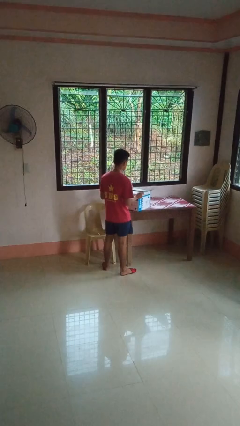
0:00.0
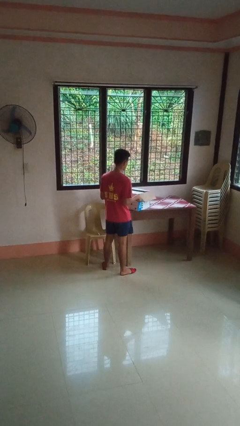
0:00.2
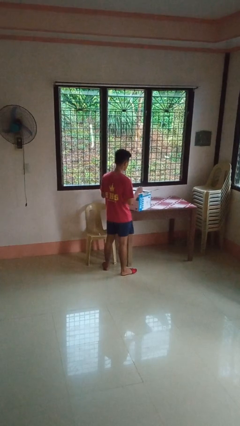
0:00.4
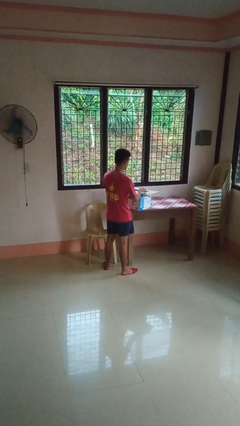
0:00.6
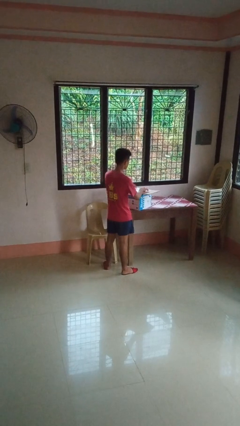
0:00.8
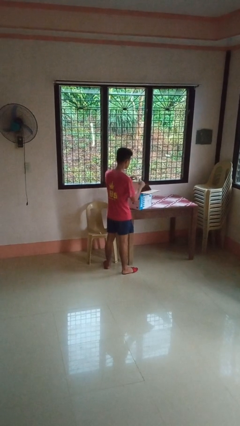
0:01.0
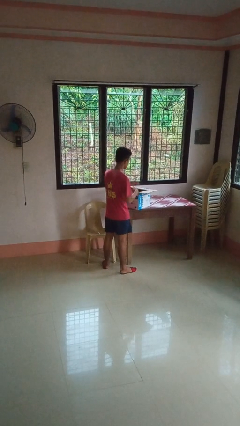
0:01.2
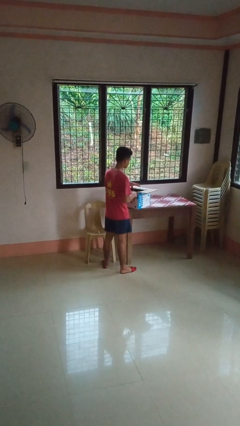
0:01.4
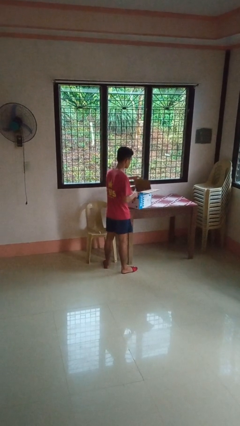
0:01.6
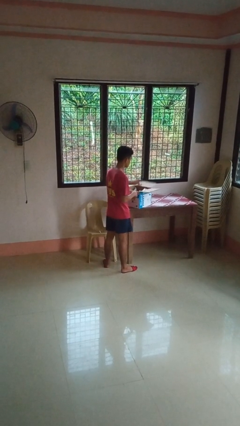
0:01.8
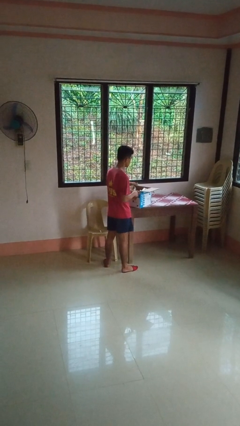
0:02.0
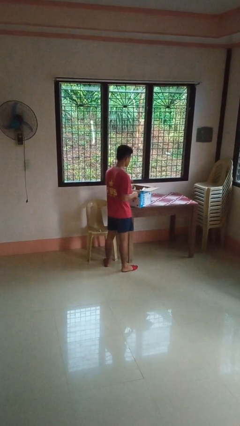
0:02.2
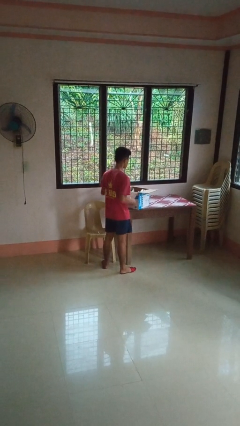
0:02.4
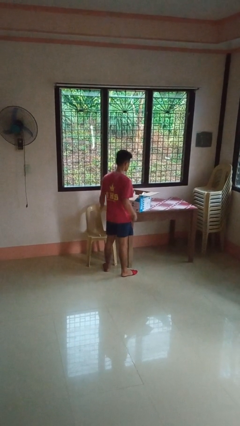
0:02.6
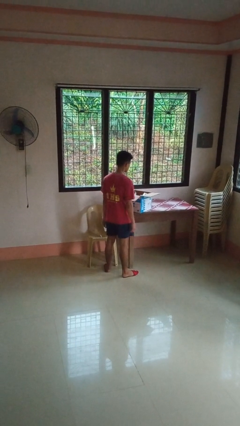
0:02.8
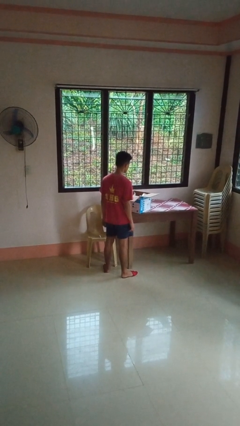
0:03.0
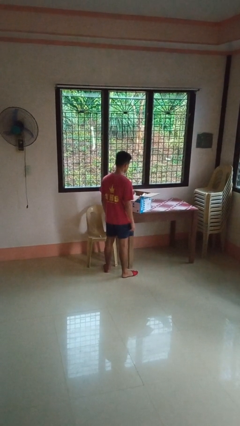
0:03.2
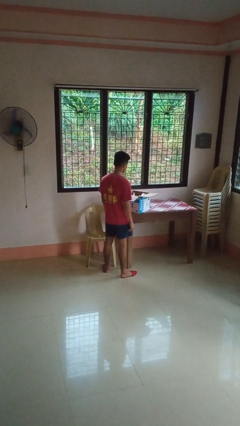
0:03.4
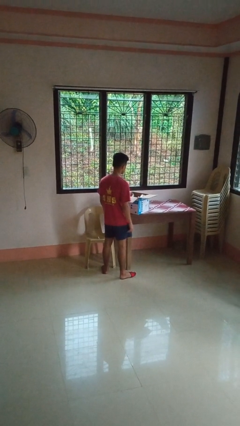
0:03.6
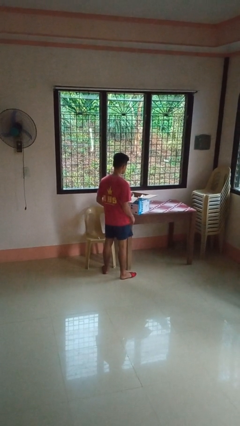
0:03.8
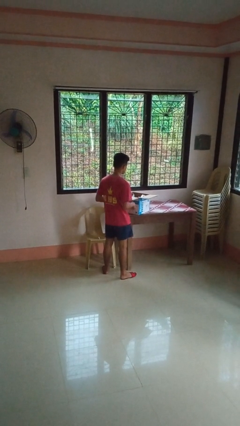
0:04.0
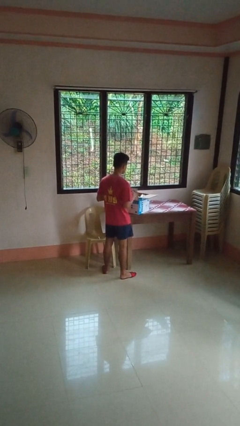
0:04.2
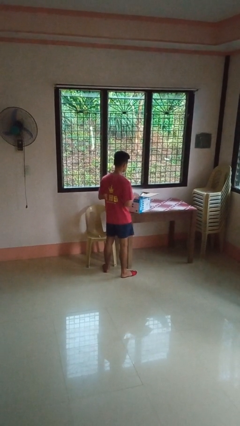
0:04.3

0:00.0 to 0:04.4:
person opens box

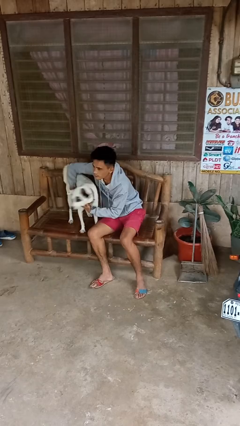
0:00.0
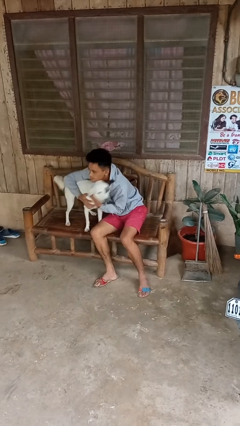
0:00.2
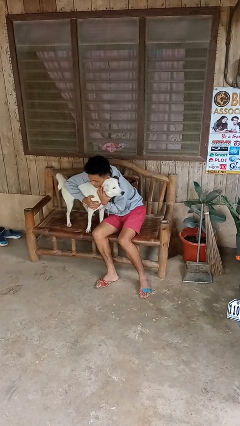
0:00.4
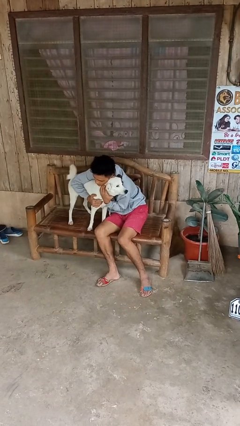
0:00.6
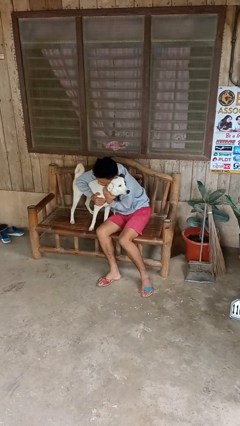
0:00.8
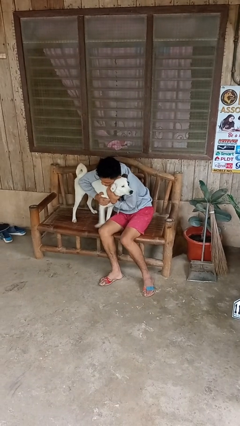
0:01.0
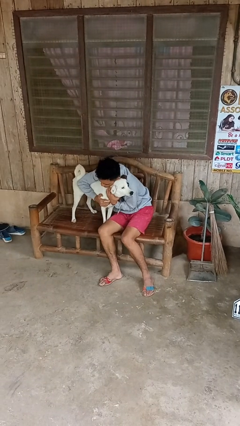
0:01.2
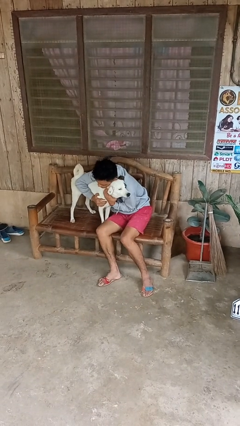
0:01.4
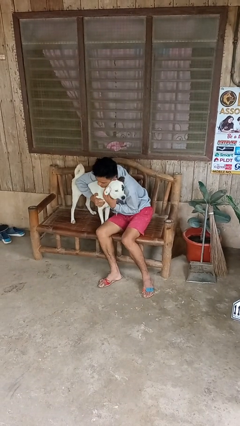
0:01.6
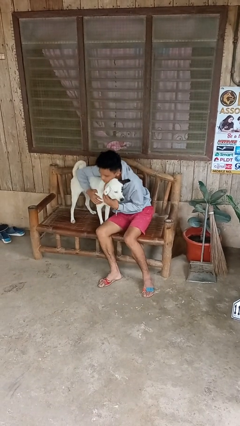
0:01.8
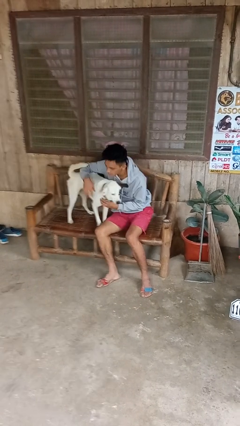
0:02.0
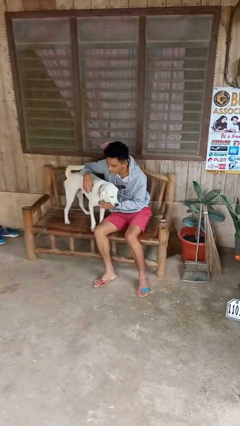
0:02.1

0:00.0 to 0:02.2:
person hugs dog

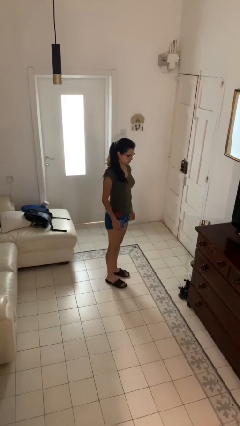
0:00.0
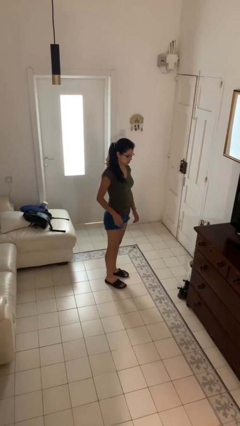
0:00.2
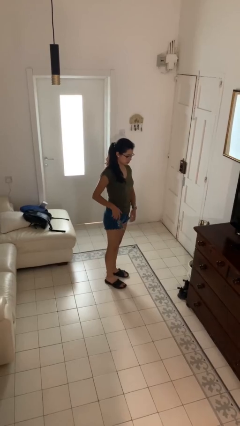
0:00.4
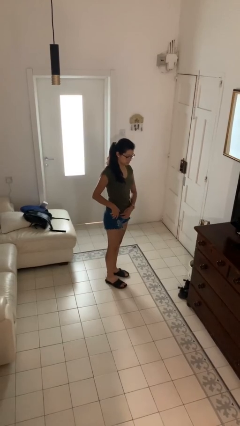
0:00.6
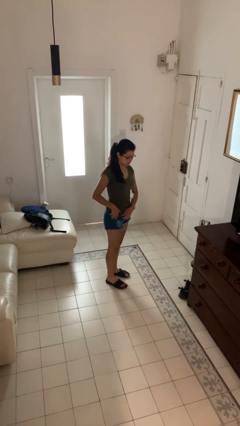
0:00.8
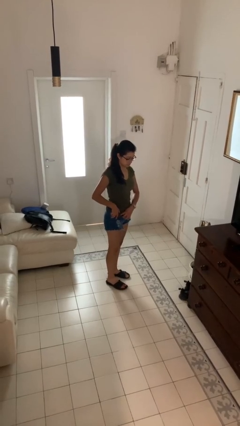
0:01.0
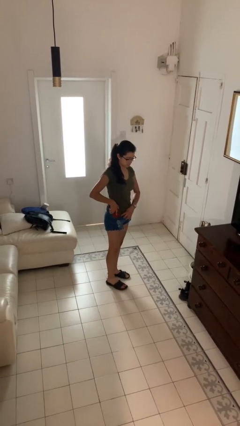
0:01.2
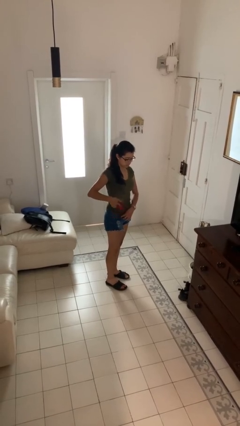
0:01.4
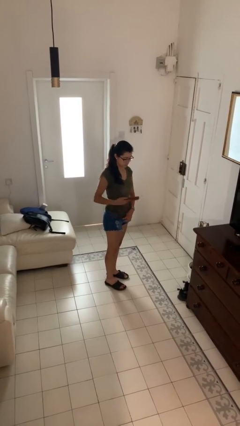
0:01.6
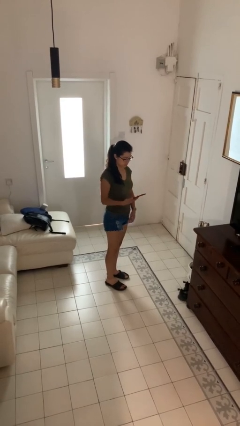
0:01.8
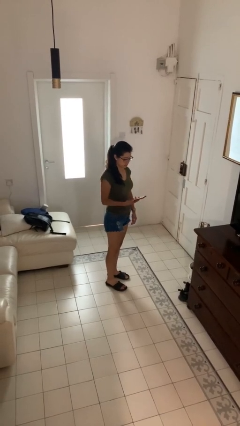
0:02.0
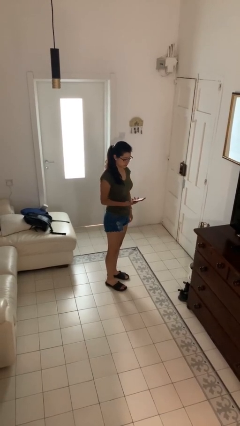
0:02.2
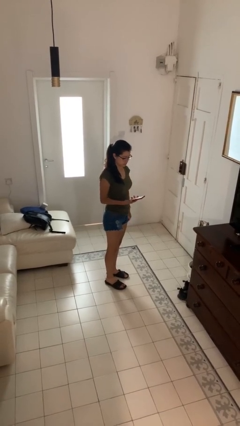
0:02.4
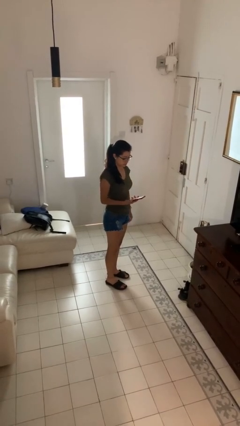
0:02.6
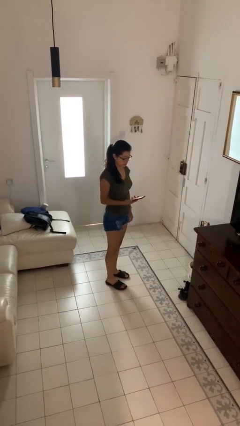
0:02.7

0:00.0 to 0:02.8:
person takes phone from pocket

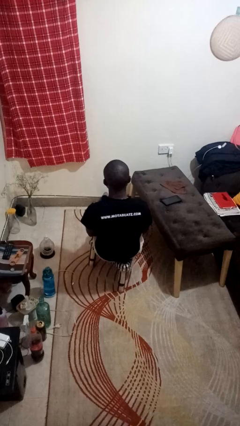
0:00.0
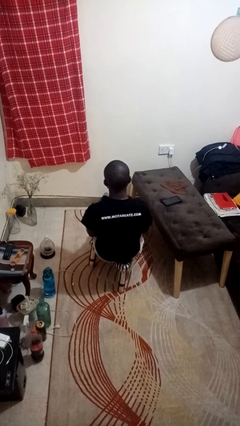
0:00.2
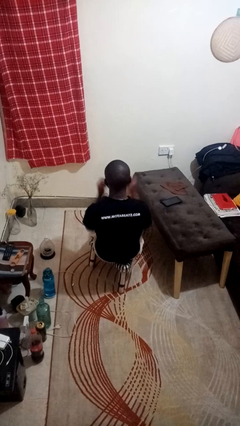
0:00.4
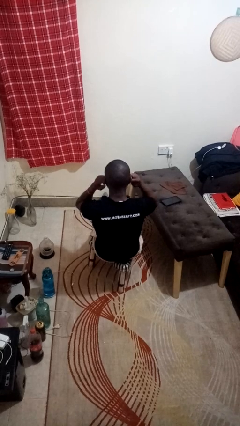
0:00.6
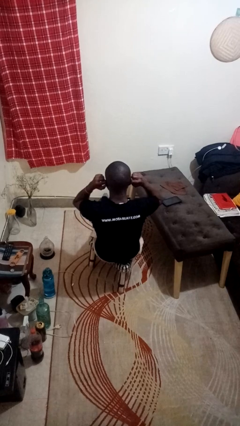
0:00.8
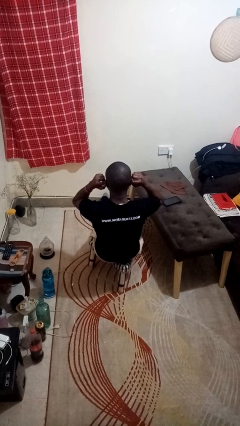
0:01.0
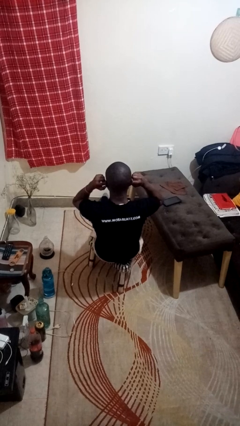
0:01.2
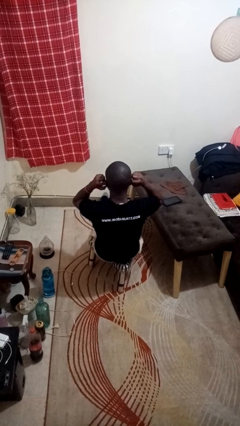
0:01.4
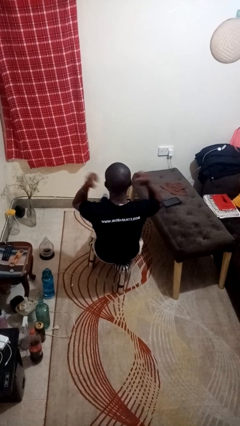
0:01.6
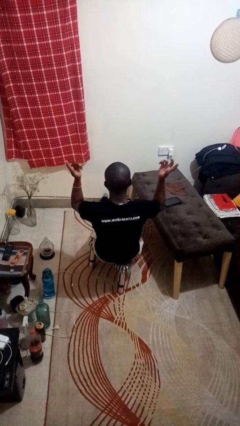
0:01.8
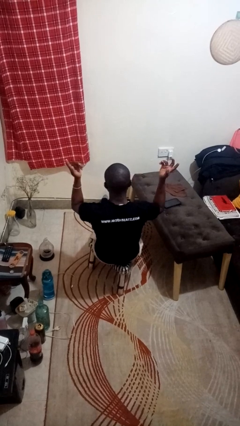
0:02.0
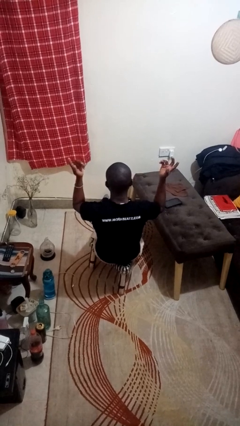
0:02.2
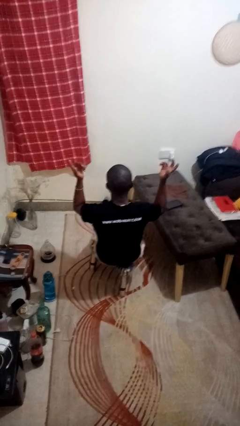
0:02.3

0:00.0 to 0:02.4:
person puts fingers in ear

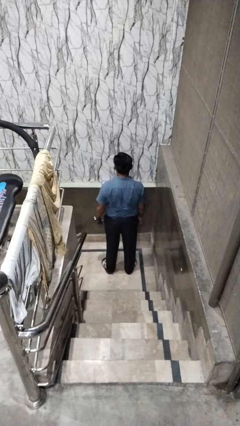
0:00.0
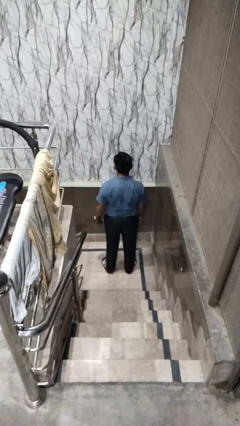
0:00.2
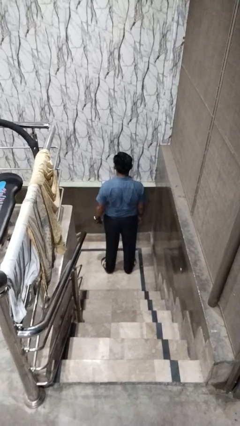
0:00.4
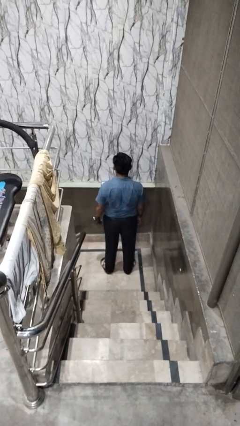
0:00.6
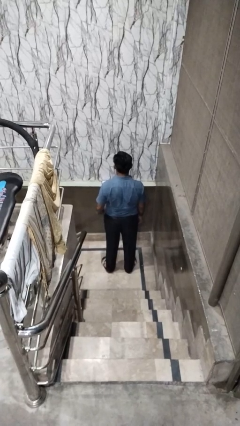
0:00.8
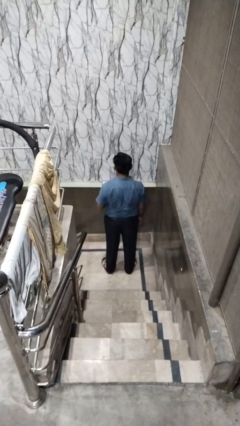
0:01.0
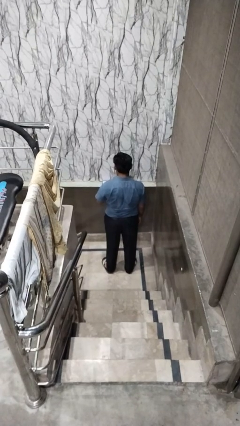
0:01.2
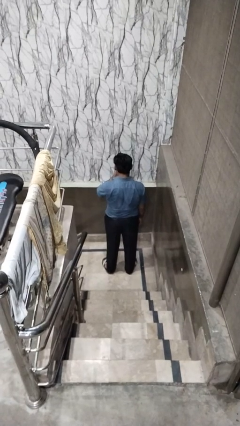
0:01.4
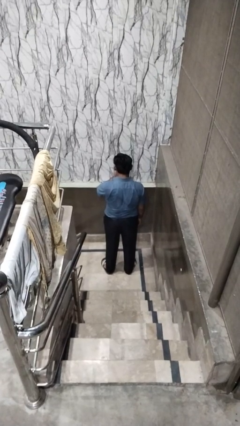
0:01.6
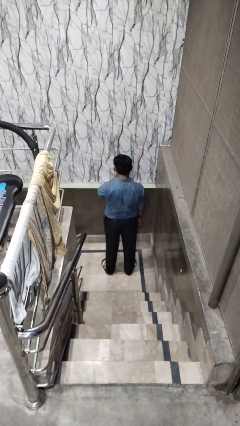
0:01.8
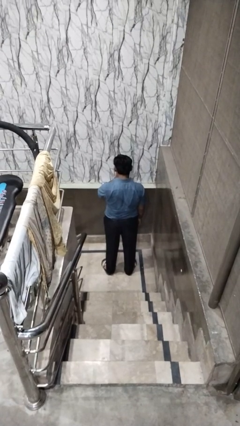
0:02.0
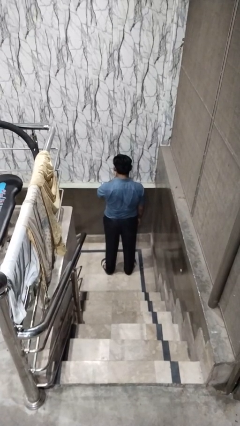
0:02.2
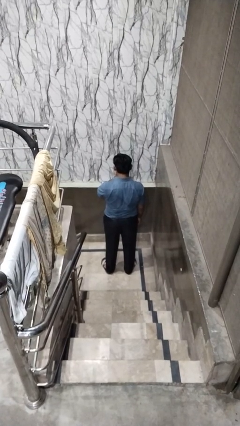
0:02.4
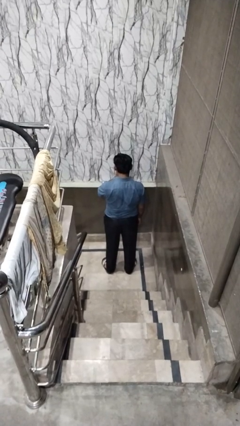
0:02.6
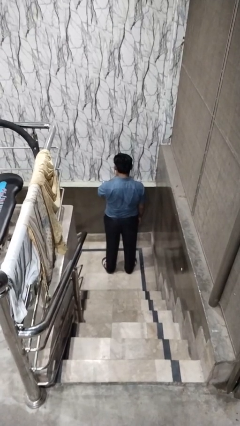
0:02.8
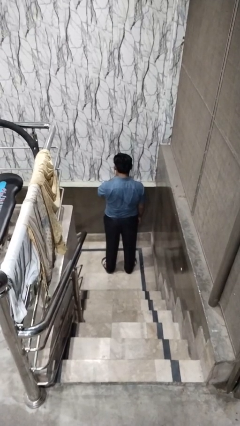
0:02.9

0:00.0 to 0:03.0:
person blows nose

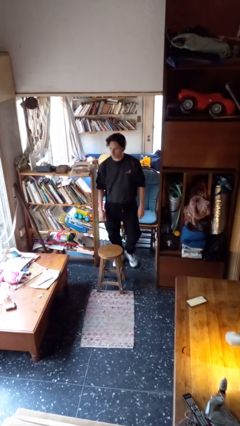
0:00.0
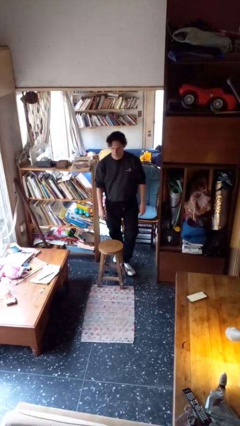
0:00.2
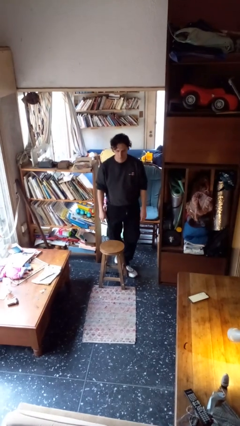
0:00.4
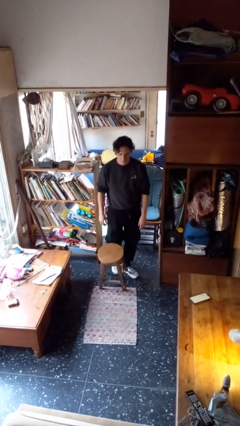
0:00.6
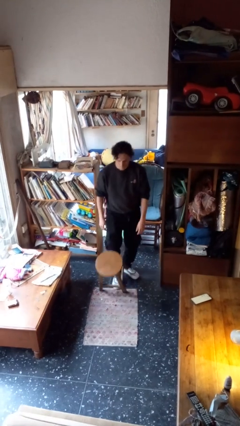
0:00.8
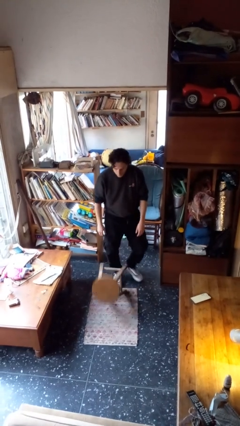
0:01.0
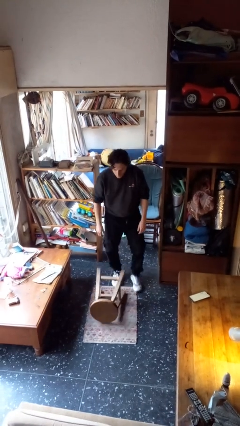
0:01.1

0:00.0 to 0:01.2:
person knocks over furniture

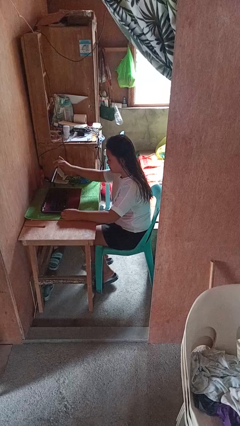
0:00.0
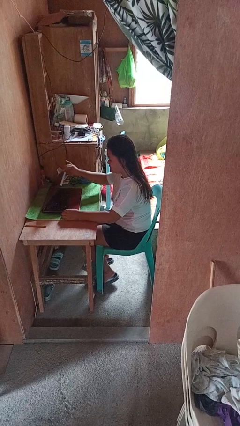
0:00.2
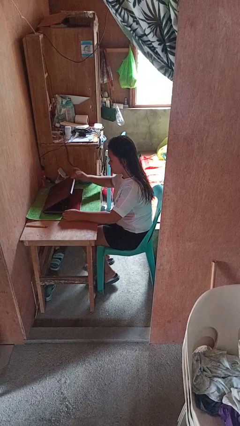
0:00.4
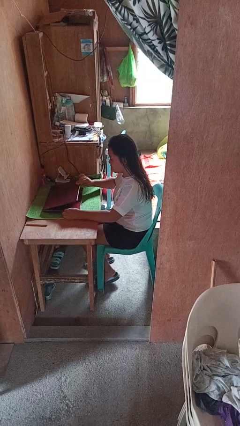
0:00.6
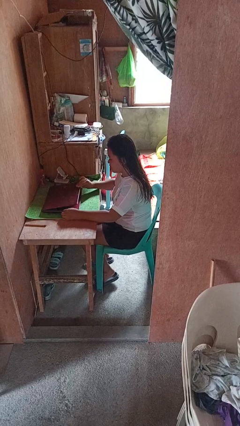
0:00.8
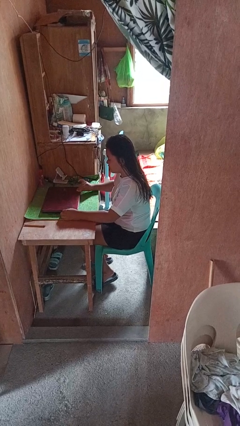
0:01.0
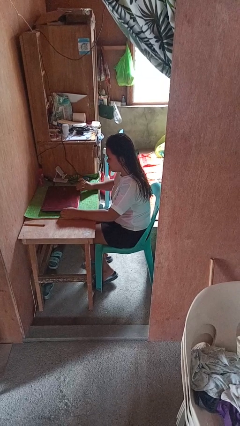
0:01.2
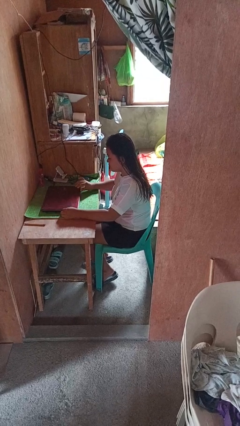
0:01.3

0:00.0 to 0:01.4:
person closes laptop
